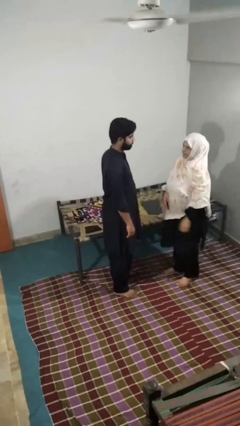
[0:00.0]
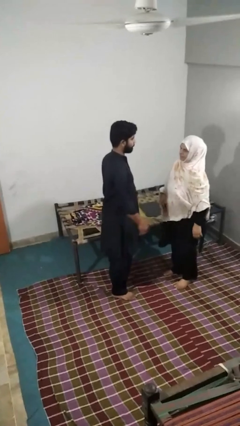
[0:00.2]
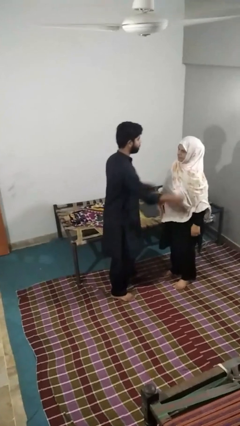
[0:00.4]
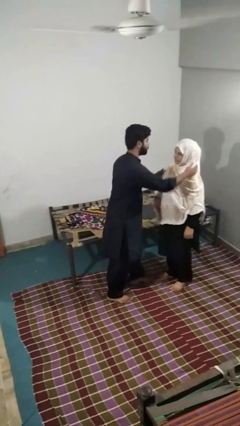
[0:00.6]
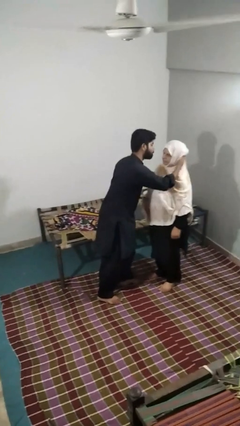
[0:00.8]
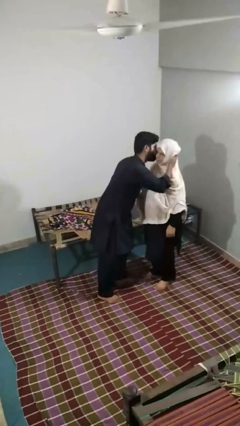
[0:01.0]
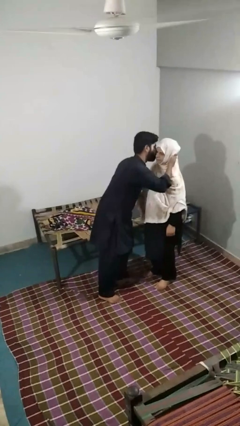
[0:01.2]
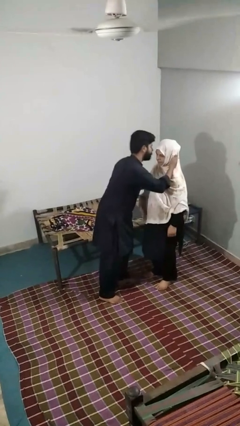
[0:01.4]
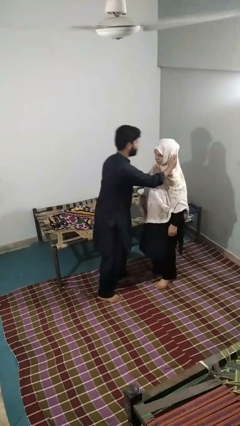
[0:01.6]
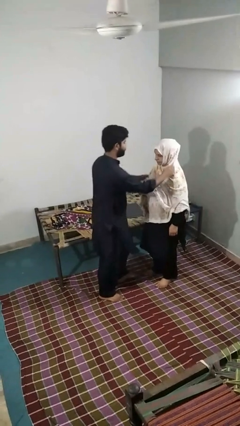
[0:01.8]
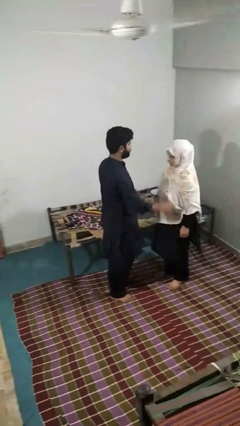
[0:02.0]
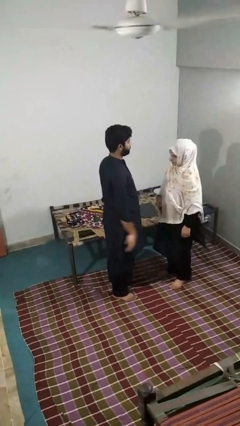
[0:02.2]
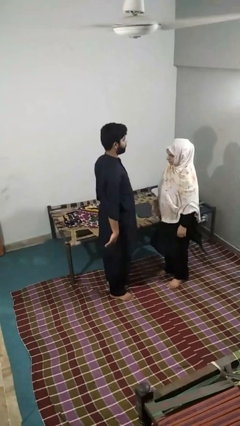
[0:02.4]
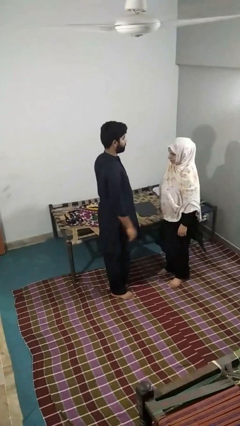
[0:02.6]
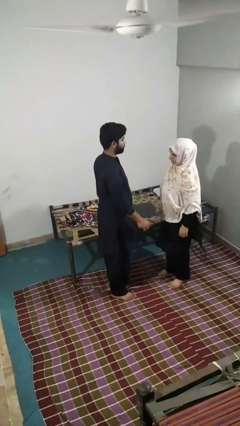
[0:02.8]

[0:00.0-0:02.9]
person kisses cheek of person

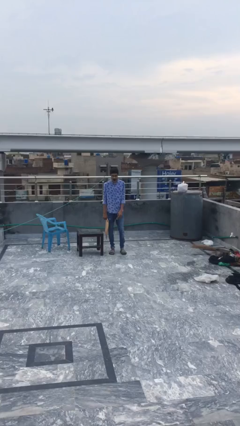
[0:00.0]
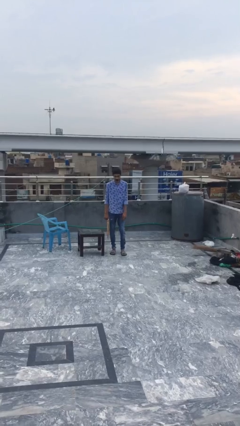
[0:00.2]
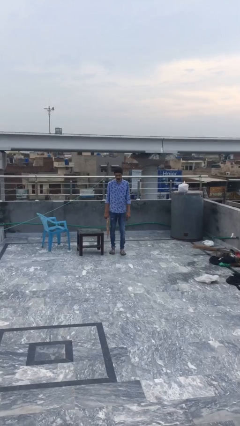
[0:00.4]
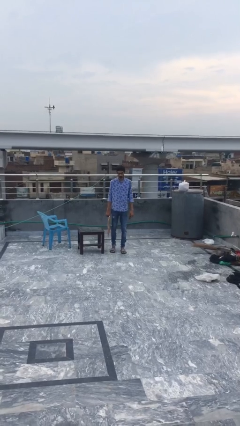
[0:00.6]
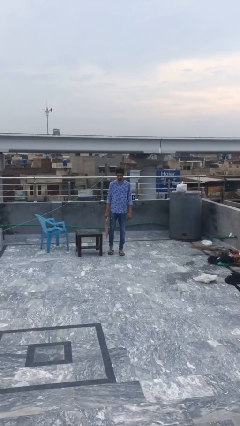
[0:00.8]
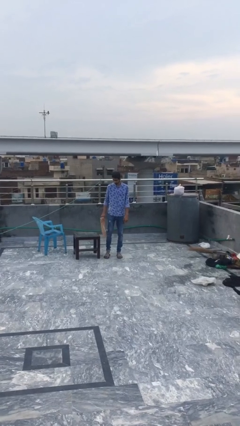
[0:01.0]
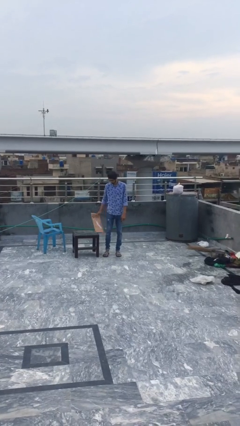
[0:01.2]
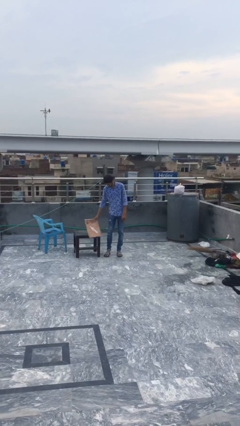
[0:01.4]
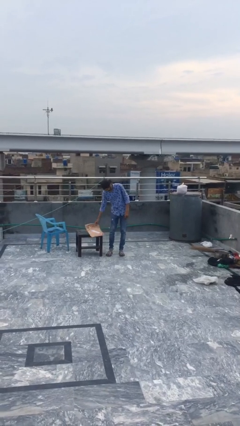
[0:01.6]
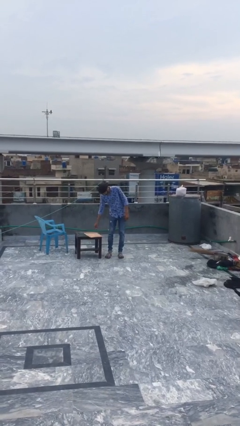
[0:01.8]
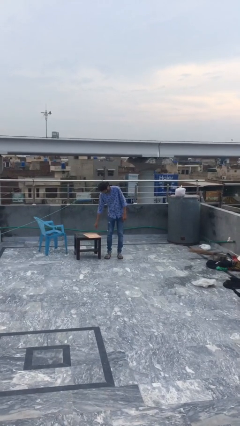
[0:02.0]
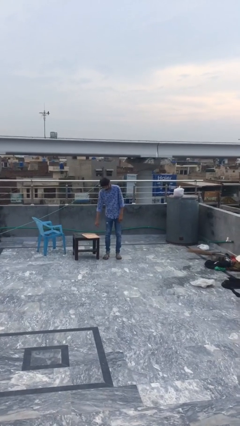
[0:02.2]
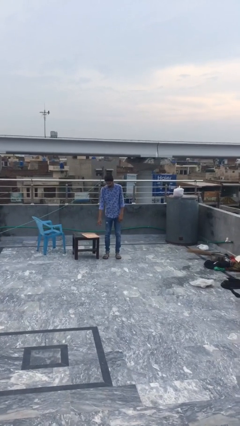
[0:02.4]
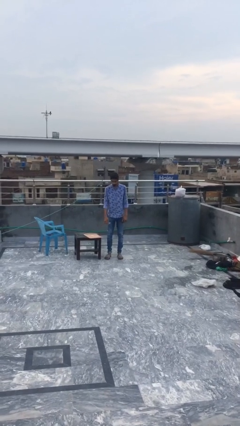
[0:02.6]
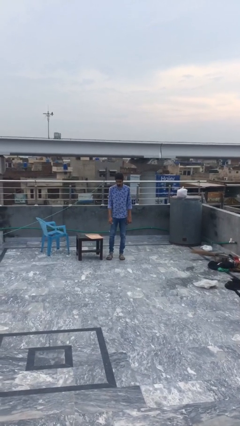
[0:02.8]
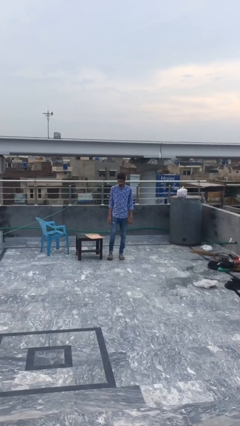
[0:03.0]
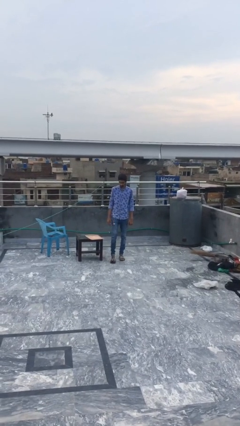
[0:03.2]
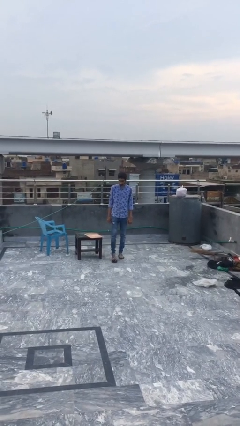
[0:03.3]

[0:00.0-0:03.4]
person puts down object on table

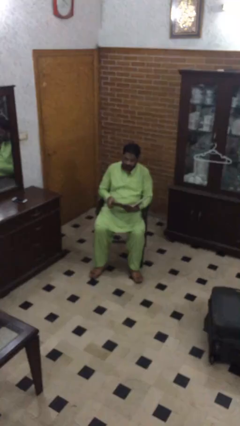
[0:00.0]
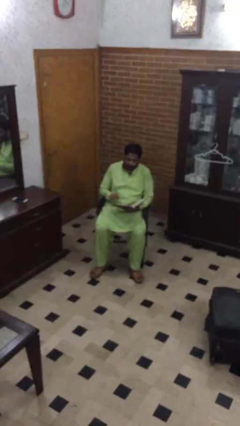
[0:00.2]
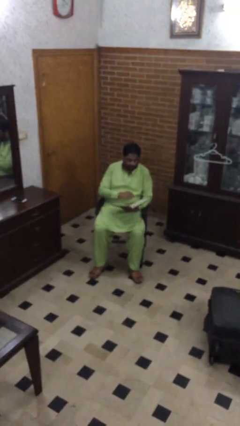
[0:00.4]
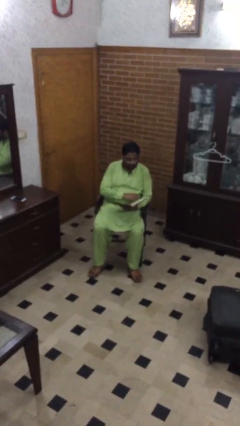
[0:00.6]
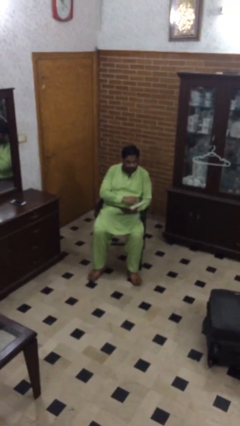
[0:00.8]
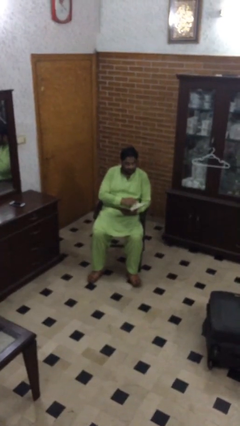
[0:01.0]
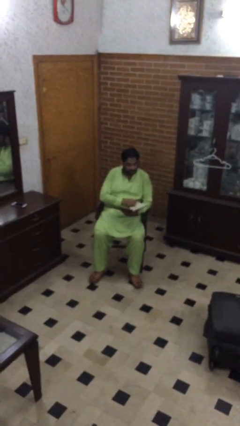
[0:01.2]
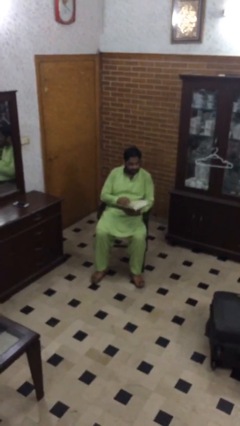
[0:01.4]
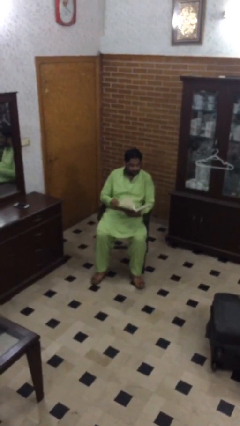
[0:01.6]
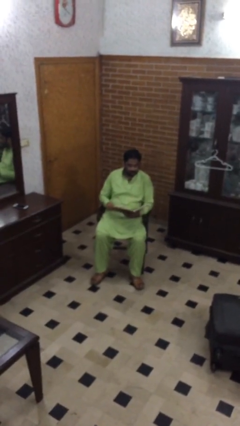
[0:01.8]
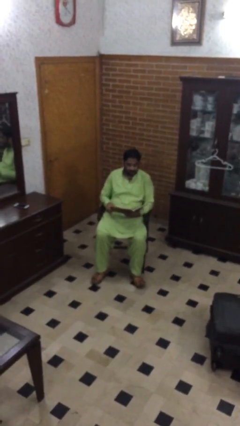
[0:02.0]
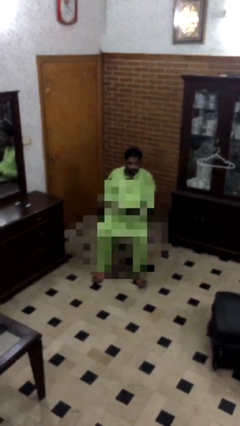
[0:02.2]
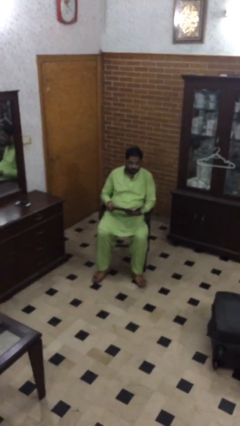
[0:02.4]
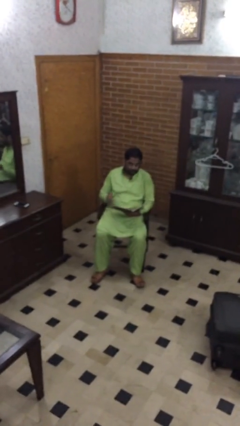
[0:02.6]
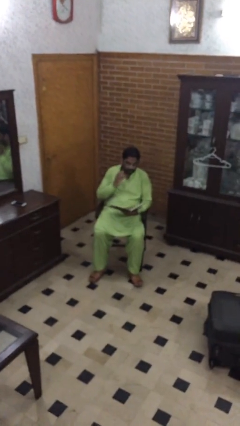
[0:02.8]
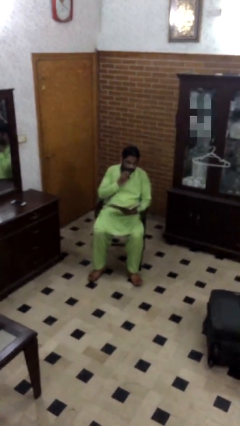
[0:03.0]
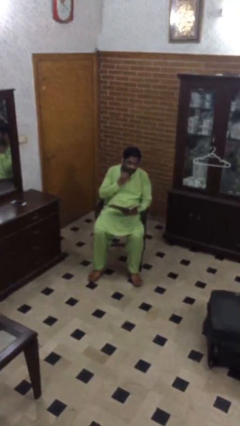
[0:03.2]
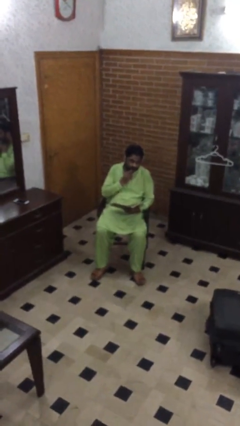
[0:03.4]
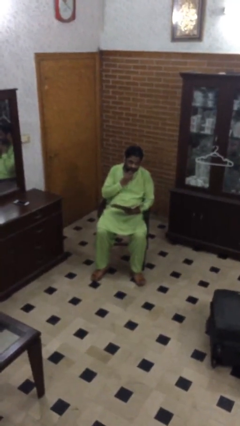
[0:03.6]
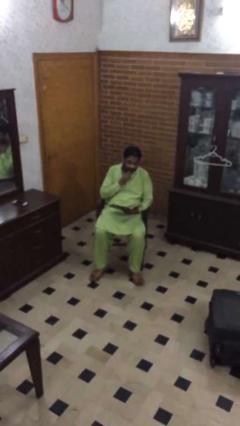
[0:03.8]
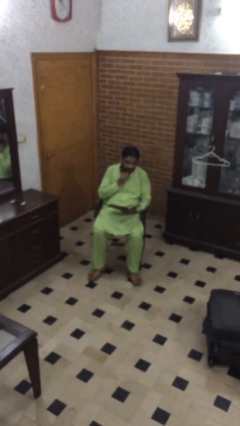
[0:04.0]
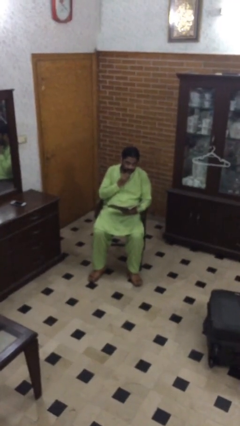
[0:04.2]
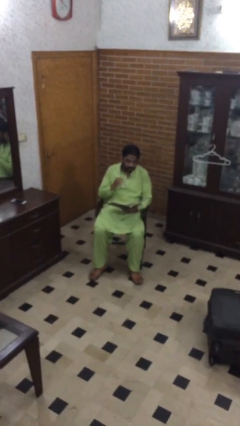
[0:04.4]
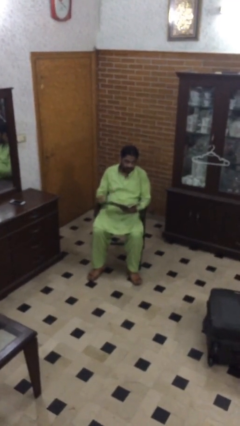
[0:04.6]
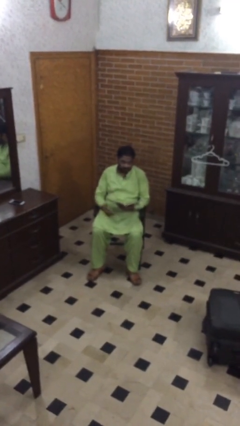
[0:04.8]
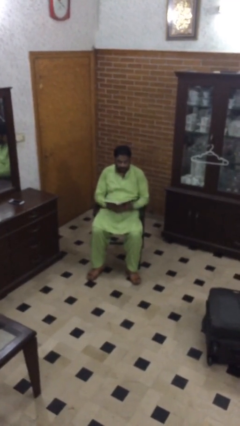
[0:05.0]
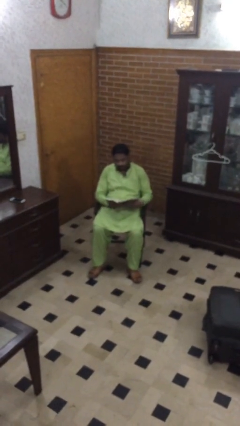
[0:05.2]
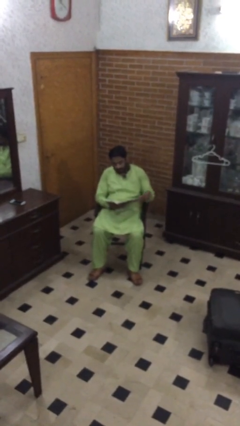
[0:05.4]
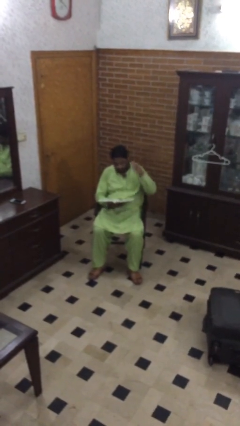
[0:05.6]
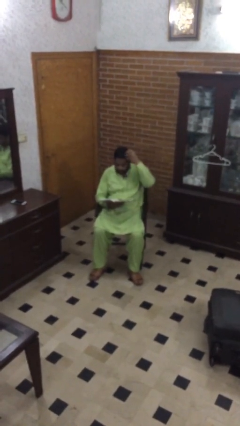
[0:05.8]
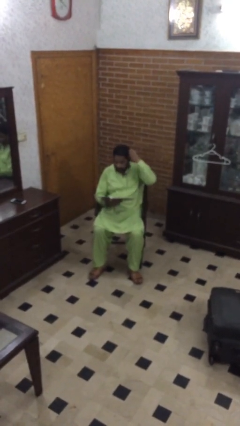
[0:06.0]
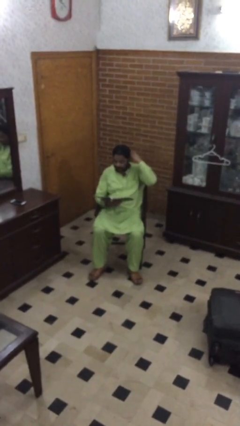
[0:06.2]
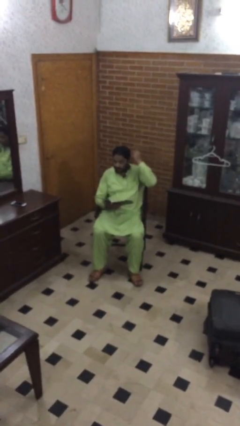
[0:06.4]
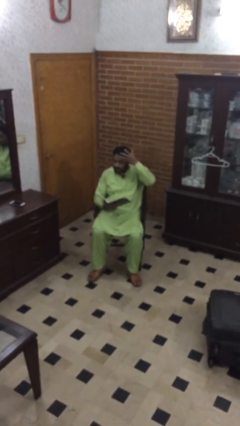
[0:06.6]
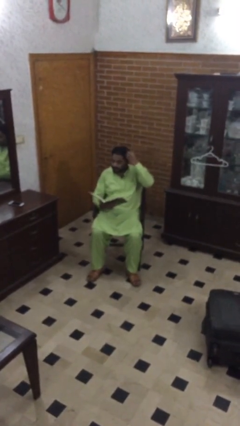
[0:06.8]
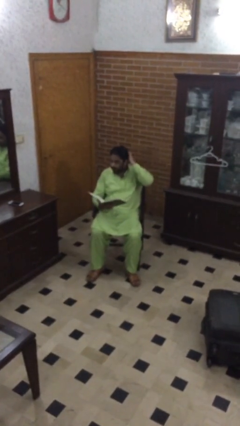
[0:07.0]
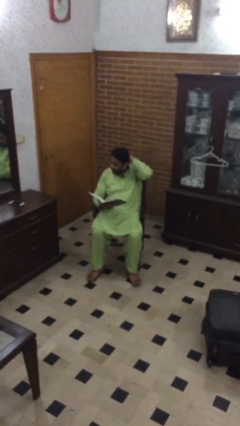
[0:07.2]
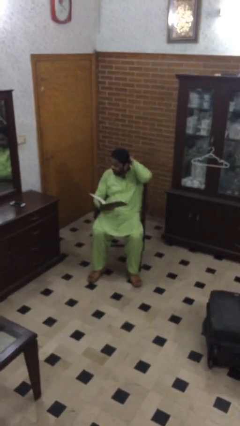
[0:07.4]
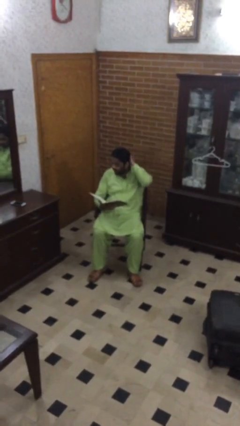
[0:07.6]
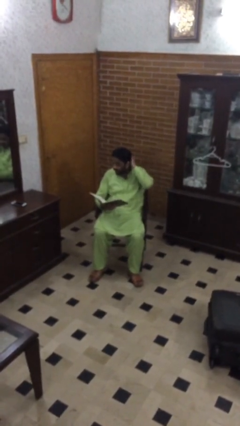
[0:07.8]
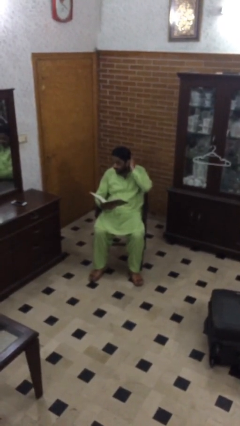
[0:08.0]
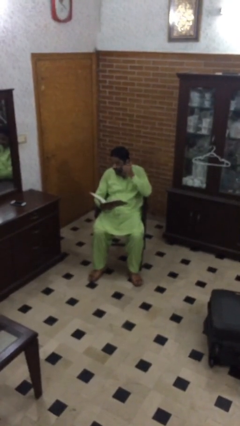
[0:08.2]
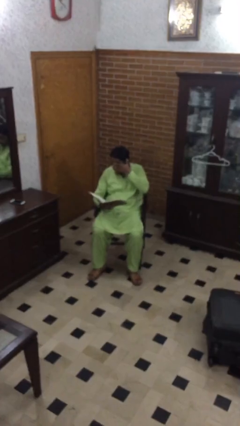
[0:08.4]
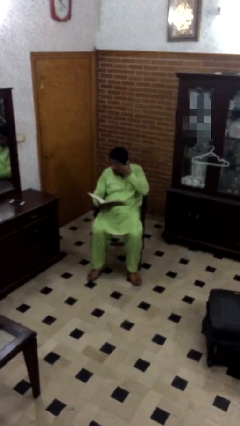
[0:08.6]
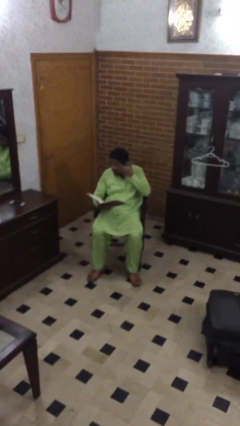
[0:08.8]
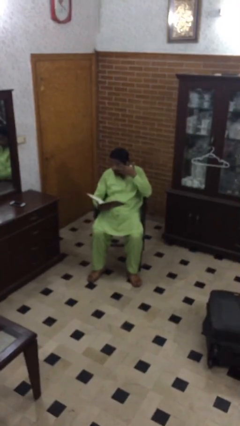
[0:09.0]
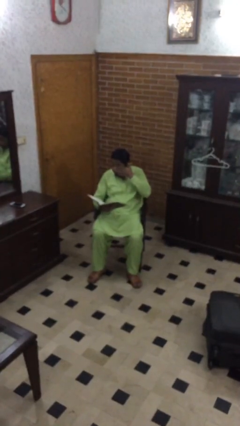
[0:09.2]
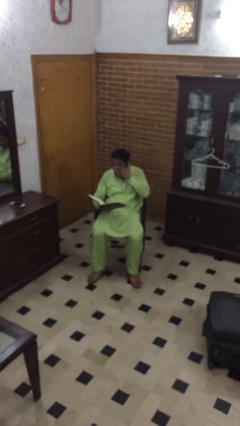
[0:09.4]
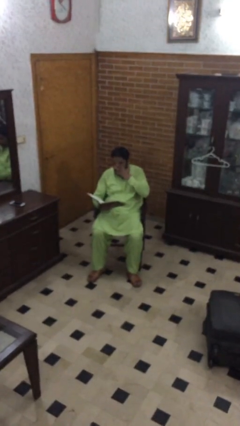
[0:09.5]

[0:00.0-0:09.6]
person reads document

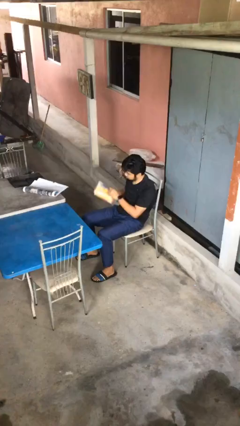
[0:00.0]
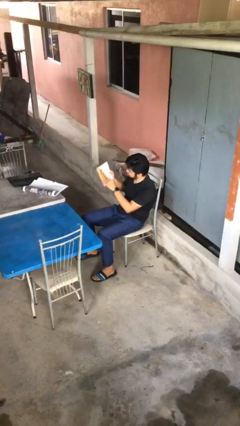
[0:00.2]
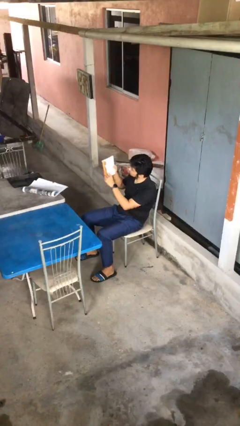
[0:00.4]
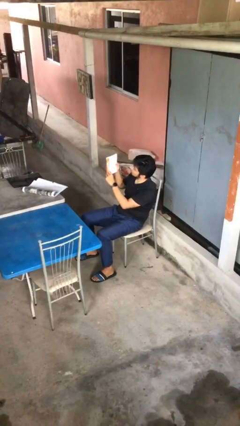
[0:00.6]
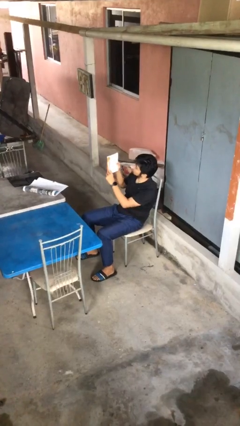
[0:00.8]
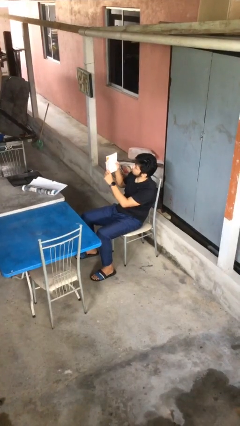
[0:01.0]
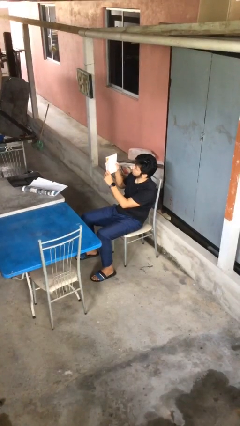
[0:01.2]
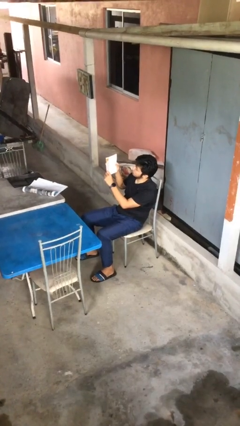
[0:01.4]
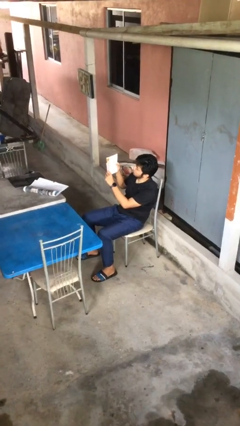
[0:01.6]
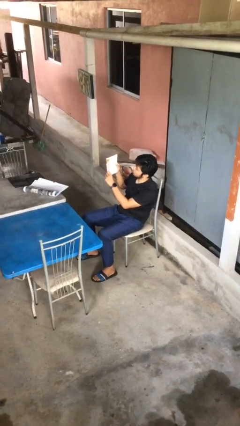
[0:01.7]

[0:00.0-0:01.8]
person reads book

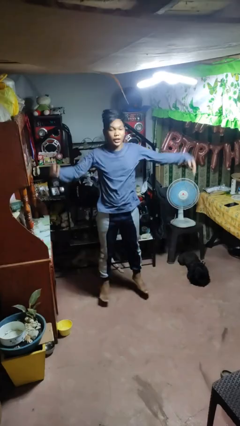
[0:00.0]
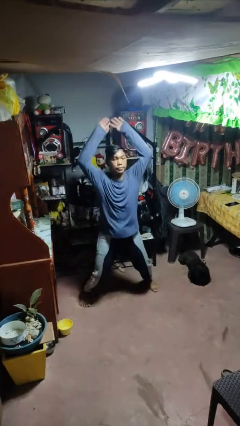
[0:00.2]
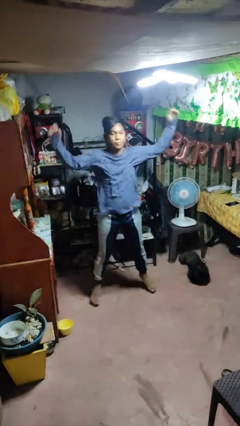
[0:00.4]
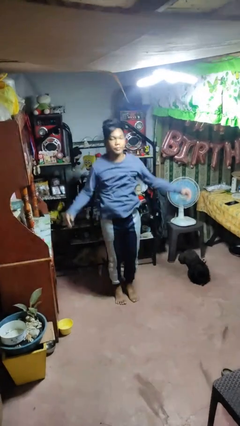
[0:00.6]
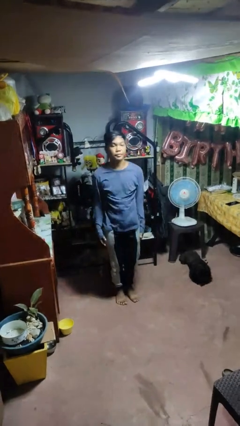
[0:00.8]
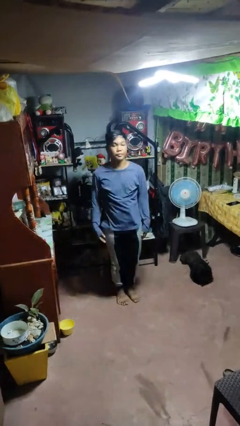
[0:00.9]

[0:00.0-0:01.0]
person exercises with jumping jacks
